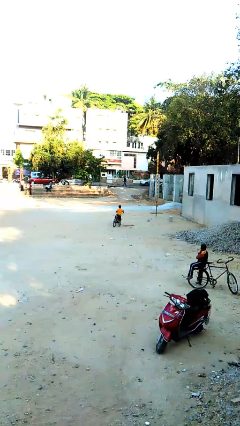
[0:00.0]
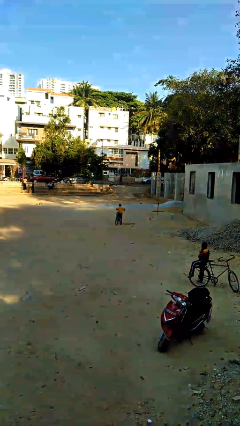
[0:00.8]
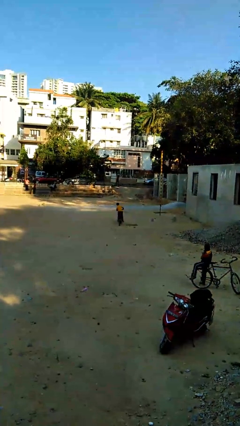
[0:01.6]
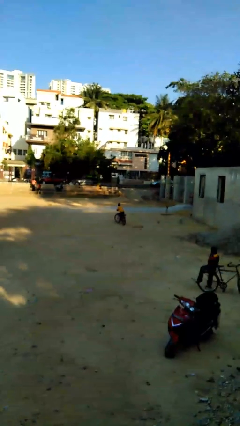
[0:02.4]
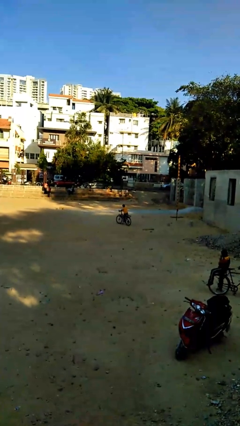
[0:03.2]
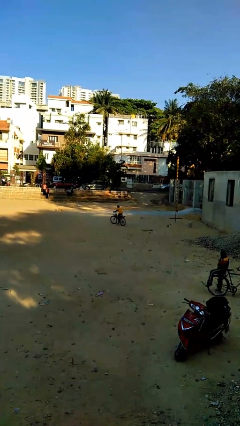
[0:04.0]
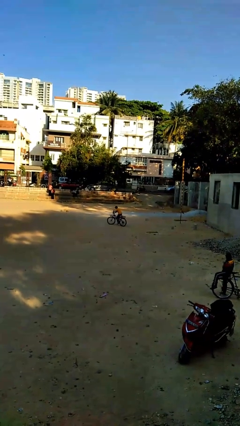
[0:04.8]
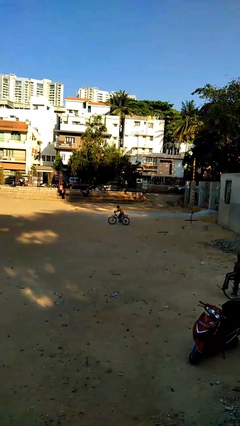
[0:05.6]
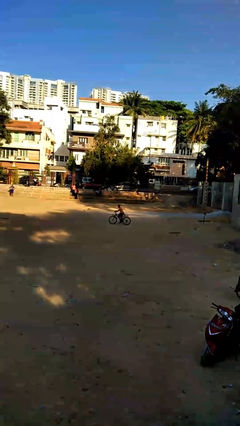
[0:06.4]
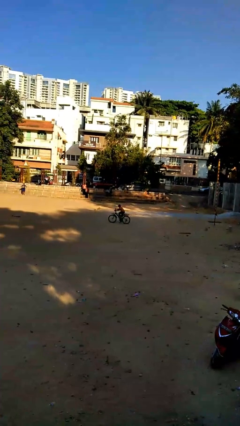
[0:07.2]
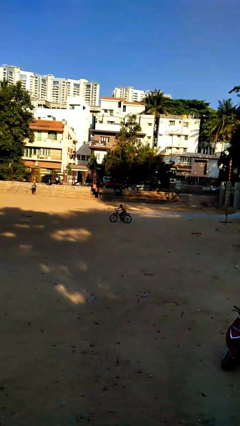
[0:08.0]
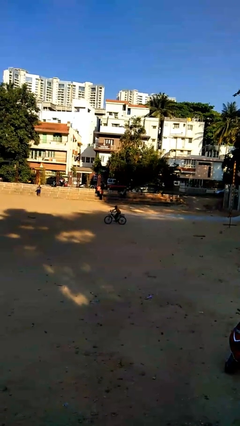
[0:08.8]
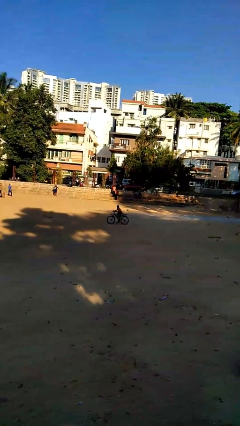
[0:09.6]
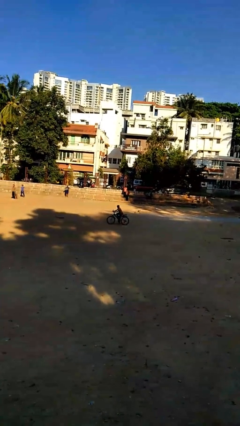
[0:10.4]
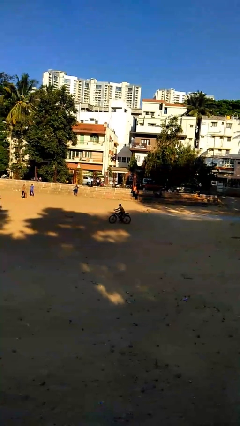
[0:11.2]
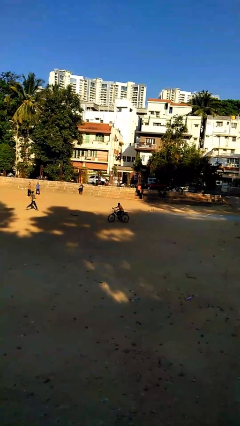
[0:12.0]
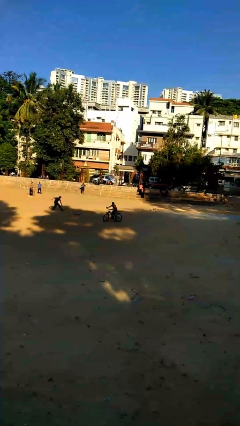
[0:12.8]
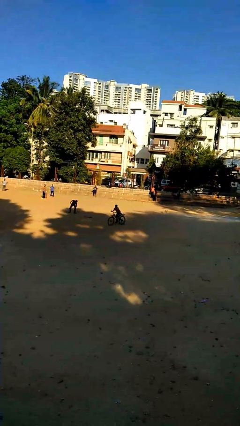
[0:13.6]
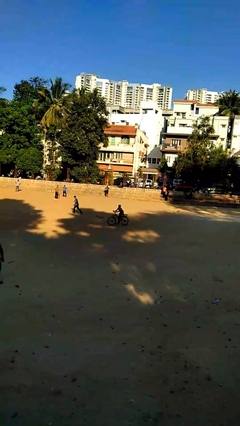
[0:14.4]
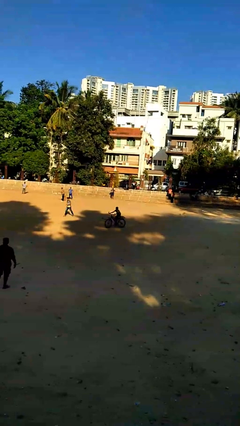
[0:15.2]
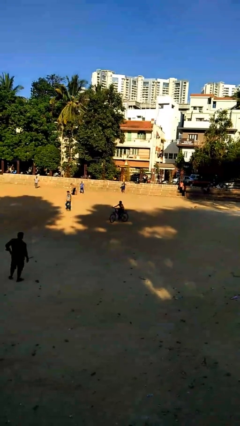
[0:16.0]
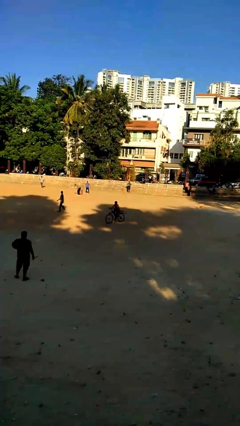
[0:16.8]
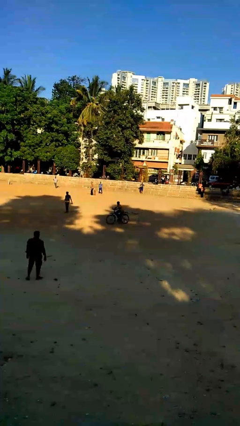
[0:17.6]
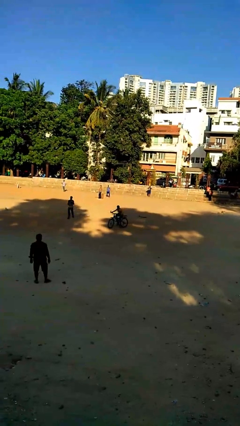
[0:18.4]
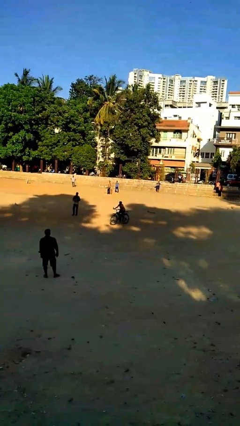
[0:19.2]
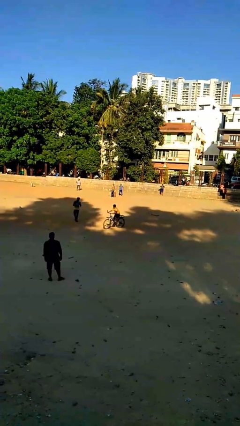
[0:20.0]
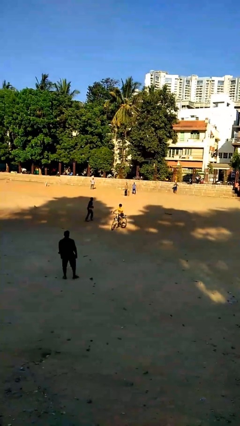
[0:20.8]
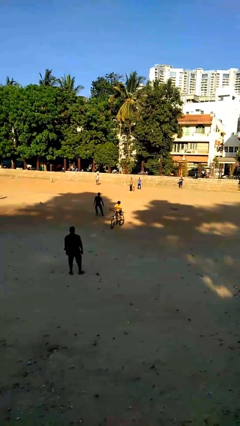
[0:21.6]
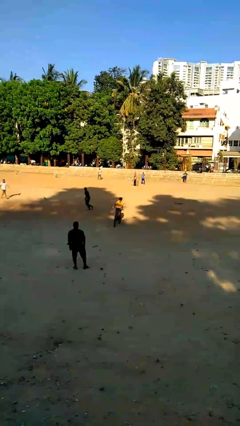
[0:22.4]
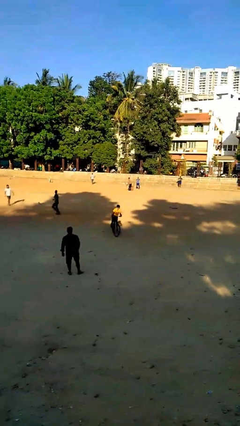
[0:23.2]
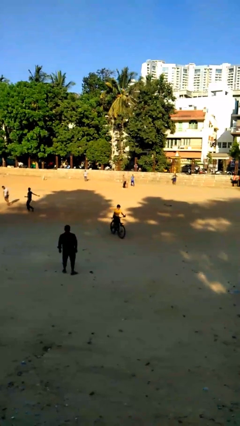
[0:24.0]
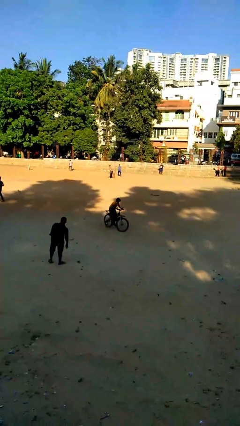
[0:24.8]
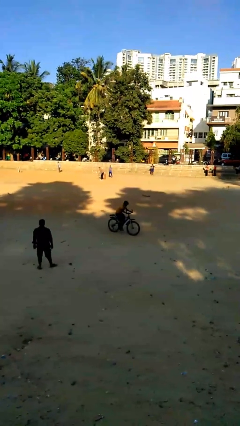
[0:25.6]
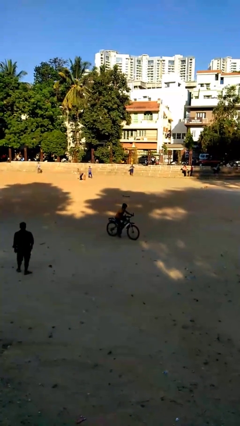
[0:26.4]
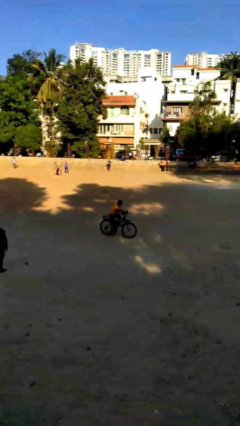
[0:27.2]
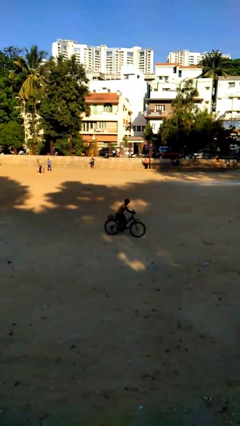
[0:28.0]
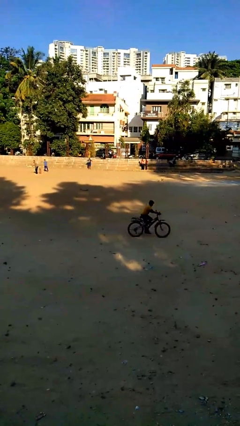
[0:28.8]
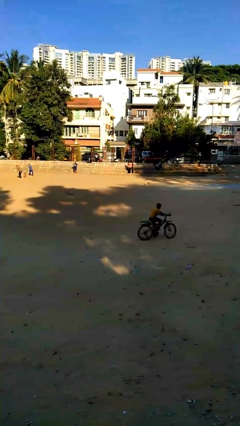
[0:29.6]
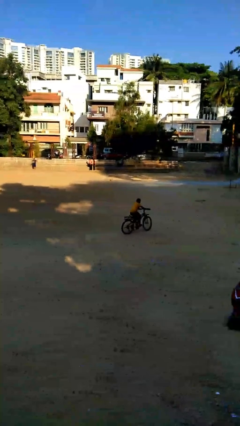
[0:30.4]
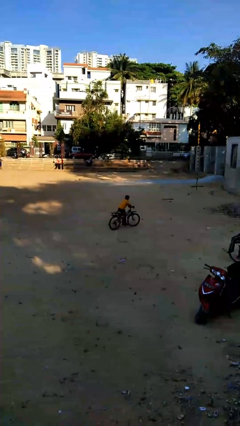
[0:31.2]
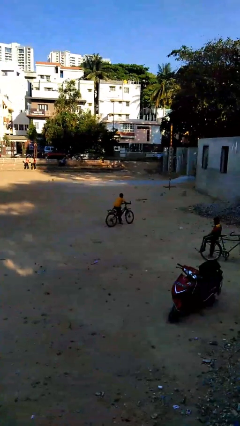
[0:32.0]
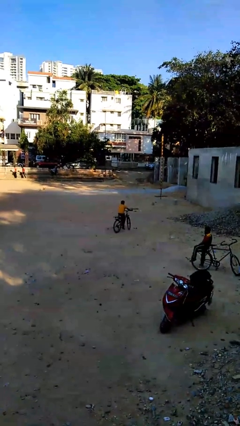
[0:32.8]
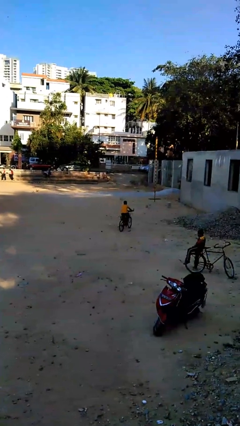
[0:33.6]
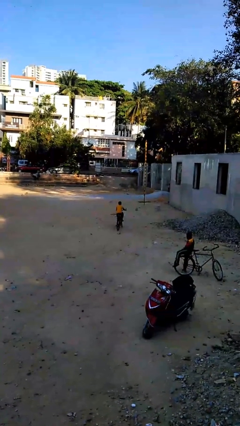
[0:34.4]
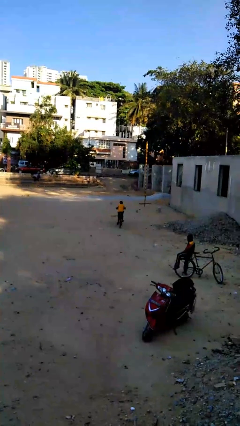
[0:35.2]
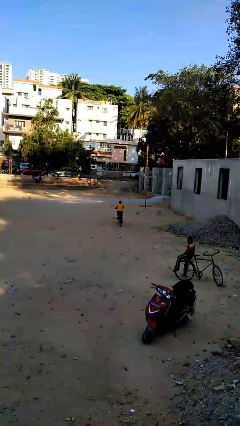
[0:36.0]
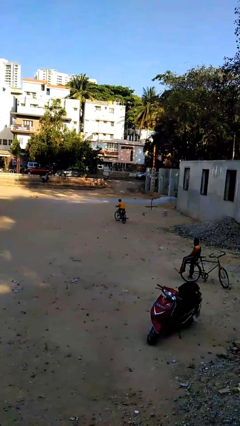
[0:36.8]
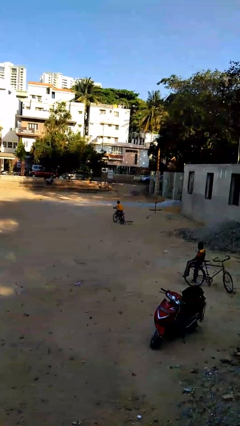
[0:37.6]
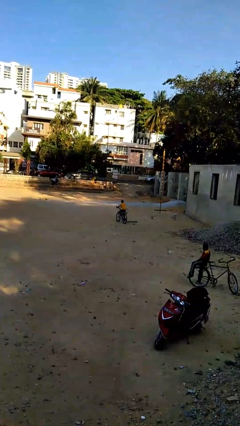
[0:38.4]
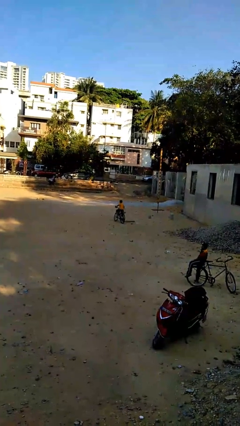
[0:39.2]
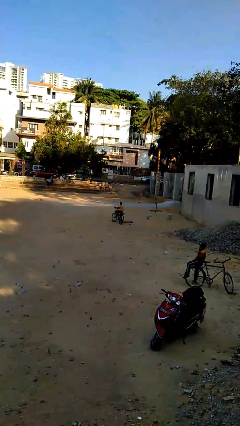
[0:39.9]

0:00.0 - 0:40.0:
person rides bicycle

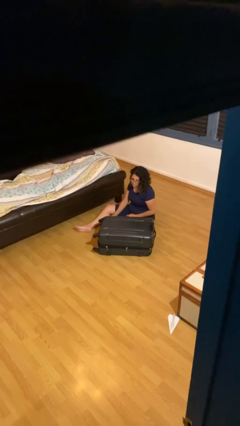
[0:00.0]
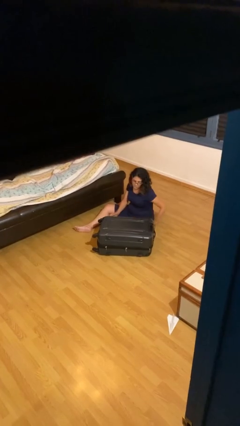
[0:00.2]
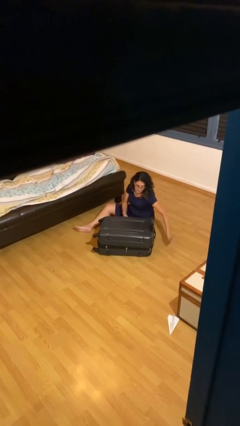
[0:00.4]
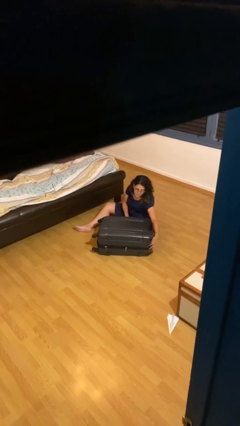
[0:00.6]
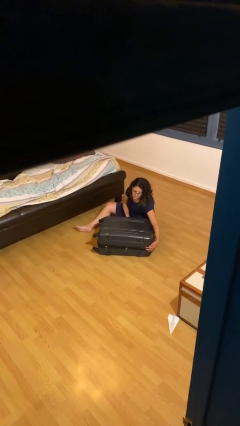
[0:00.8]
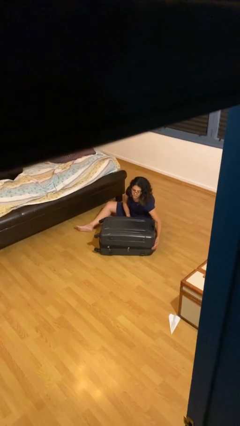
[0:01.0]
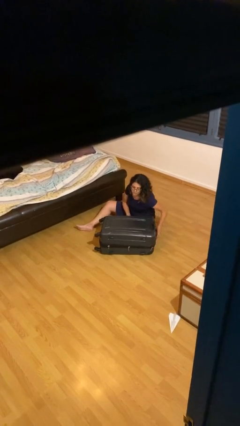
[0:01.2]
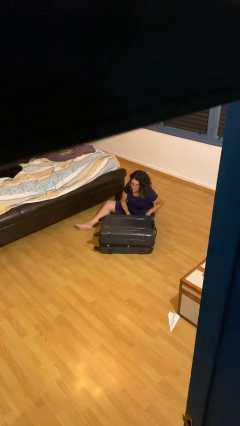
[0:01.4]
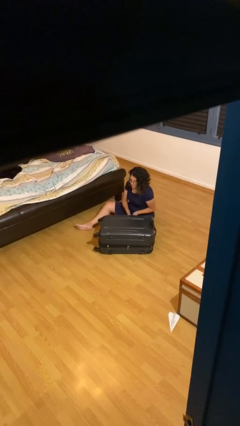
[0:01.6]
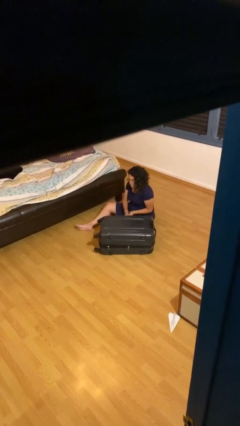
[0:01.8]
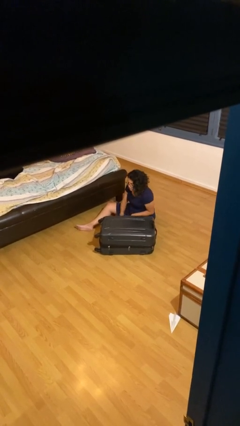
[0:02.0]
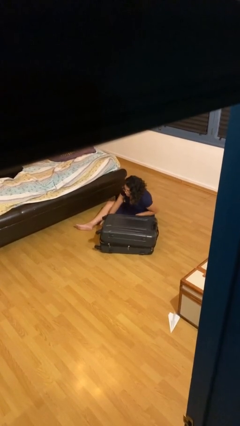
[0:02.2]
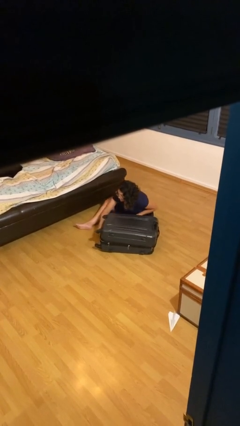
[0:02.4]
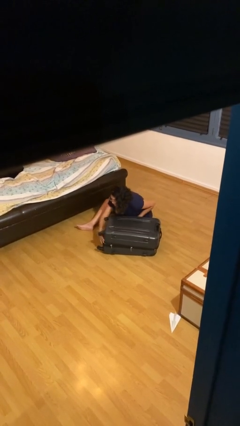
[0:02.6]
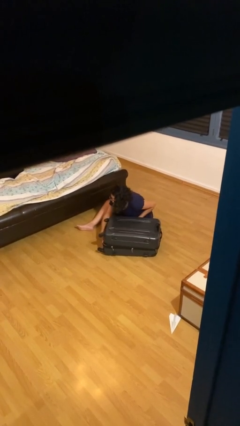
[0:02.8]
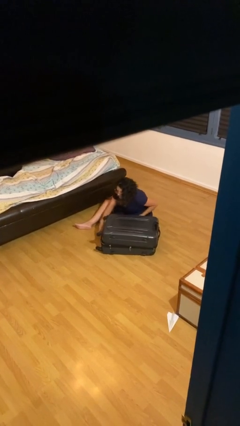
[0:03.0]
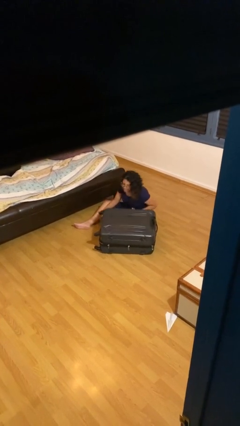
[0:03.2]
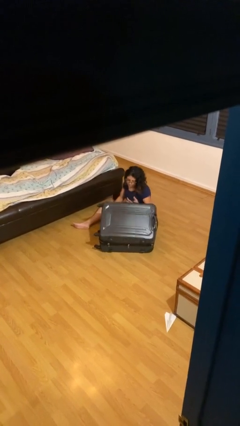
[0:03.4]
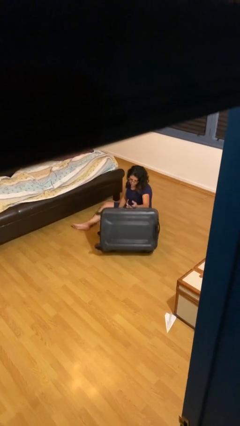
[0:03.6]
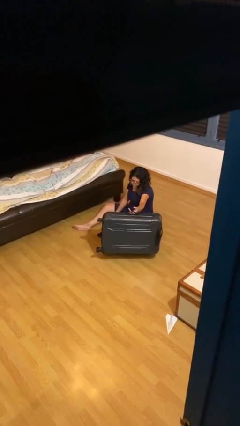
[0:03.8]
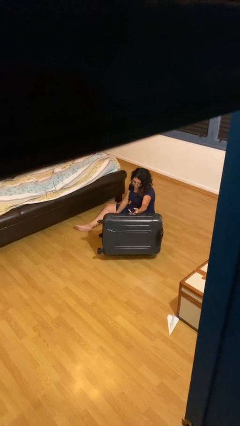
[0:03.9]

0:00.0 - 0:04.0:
person opens suitcase

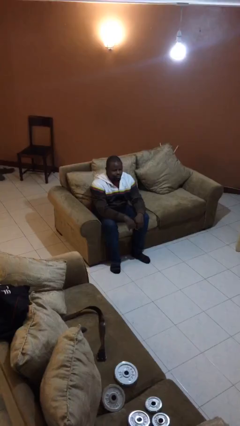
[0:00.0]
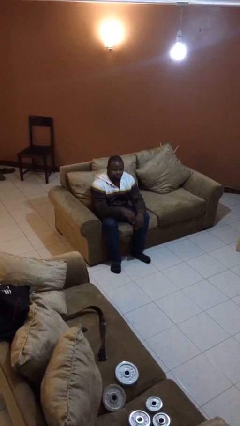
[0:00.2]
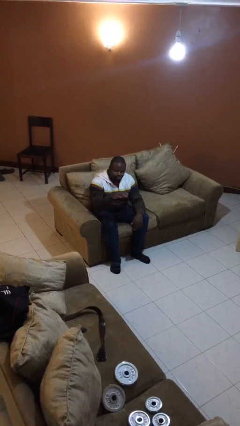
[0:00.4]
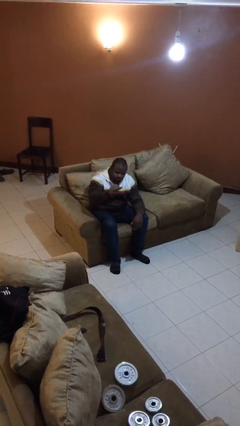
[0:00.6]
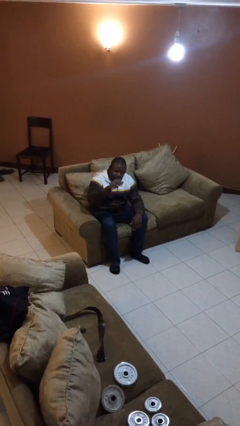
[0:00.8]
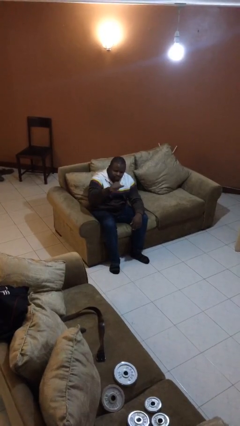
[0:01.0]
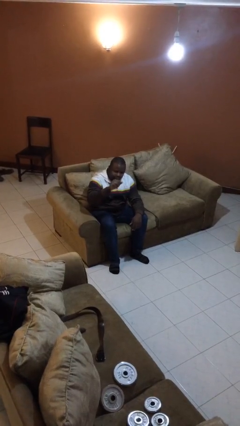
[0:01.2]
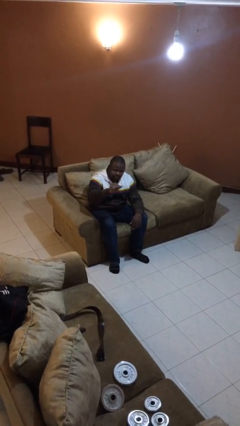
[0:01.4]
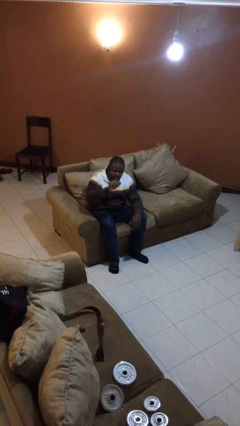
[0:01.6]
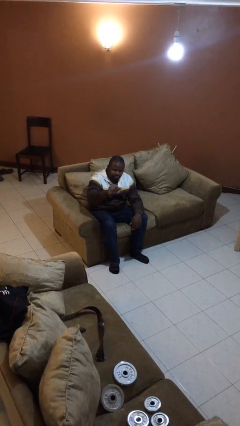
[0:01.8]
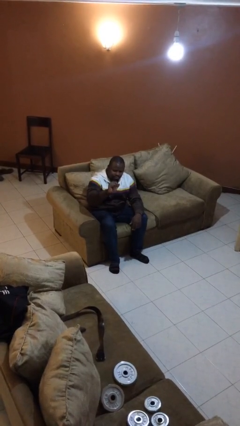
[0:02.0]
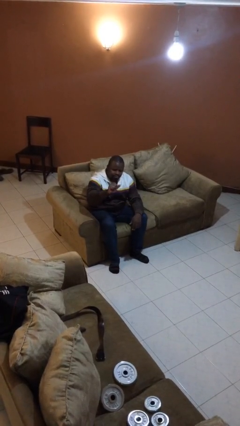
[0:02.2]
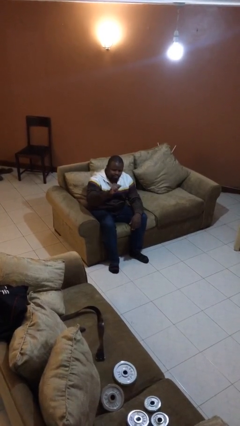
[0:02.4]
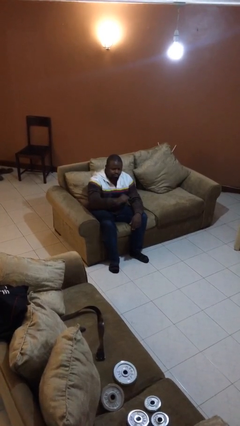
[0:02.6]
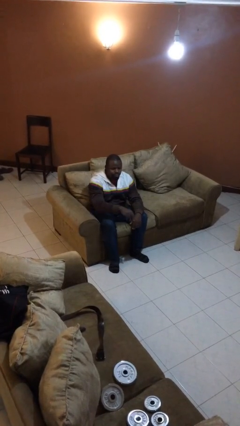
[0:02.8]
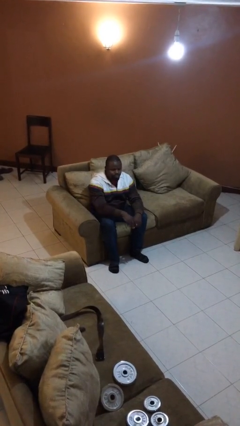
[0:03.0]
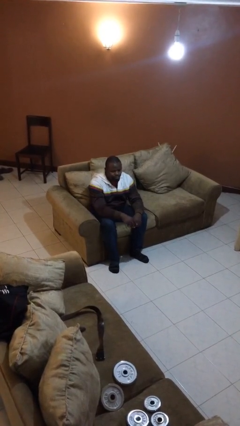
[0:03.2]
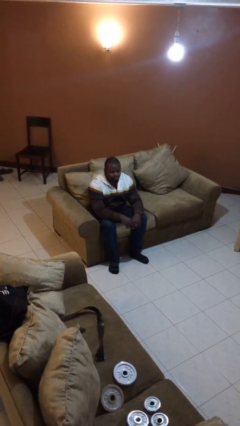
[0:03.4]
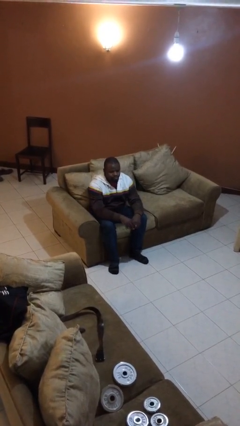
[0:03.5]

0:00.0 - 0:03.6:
person gestures come here

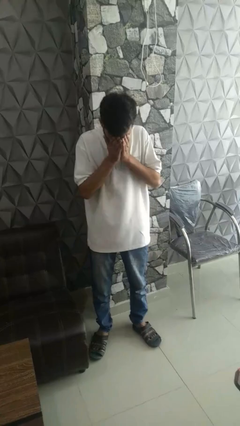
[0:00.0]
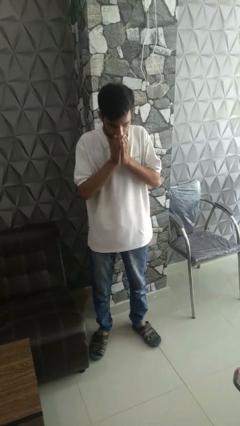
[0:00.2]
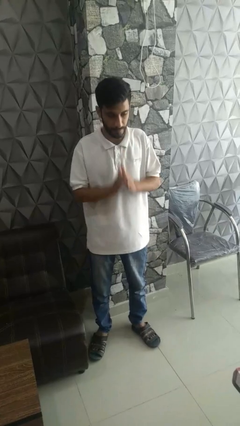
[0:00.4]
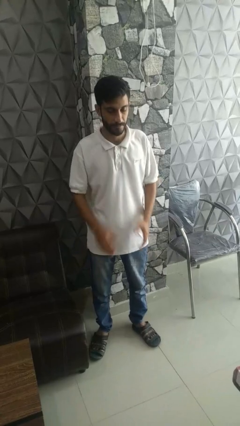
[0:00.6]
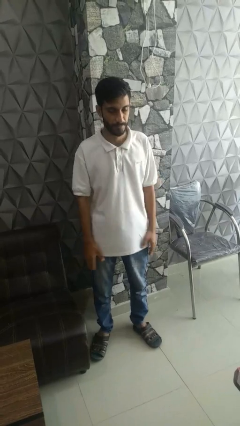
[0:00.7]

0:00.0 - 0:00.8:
person sneezes into hand
